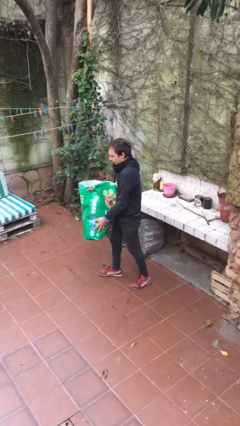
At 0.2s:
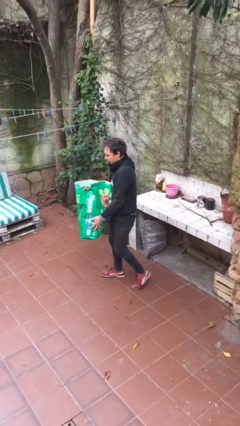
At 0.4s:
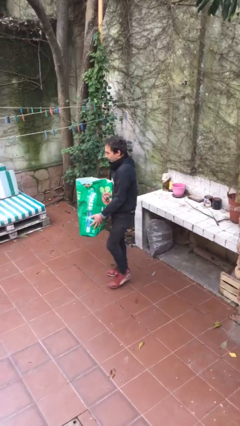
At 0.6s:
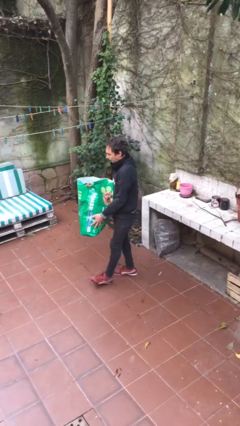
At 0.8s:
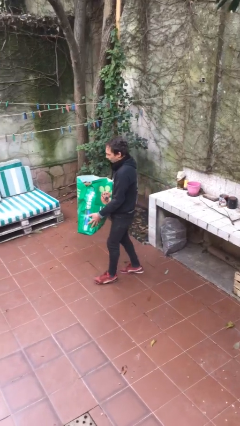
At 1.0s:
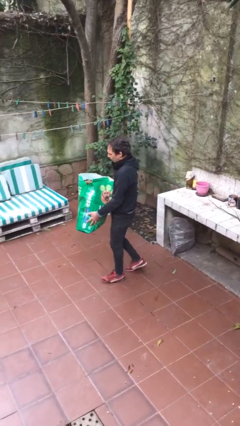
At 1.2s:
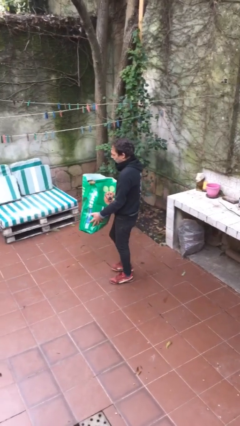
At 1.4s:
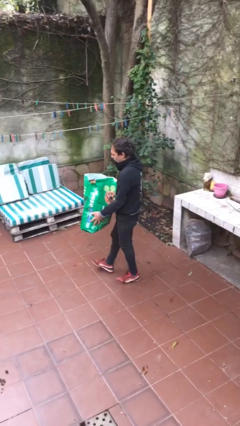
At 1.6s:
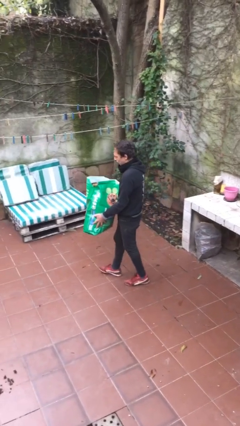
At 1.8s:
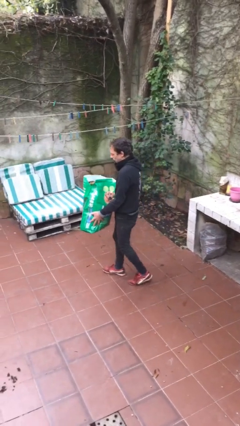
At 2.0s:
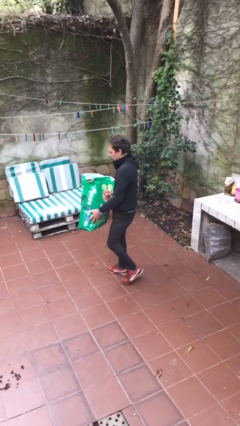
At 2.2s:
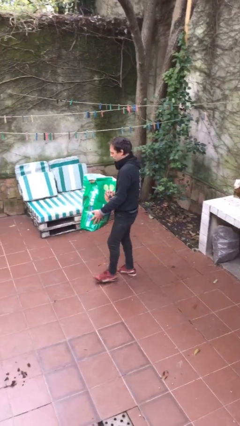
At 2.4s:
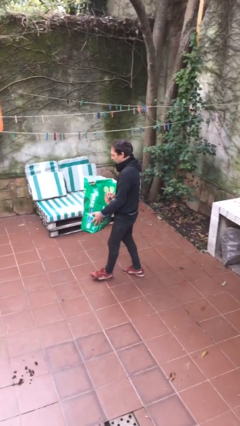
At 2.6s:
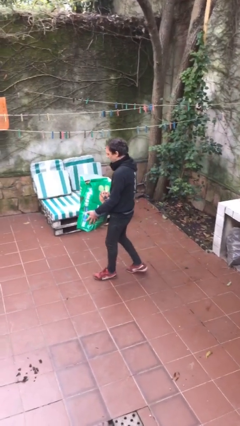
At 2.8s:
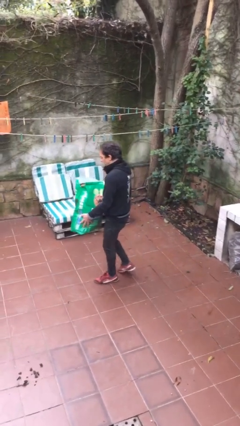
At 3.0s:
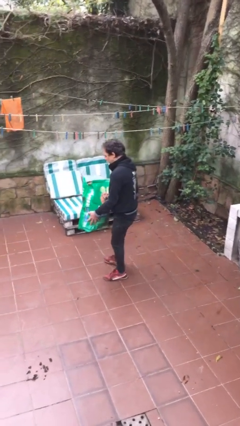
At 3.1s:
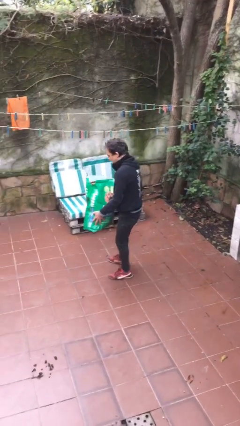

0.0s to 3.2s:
person carries heavy object

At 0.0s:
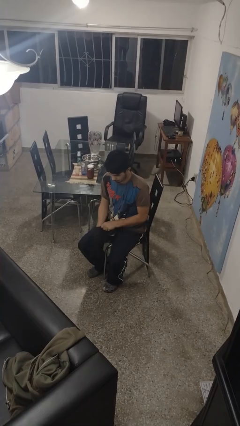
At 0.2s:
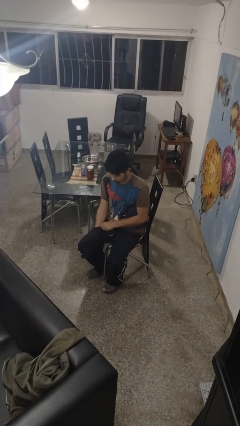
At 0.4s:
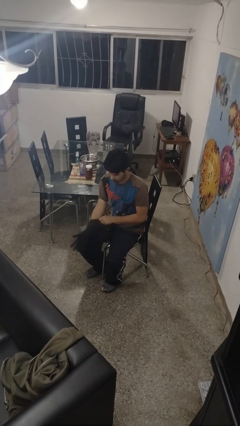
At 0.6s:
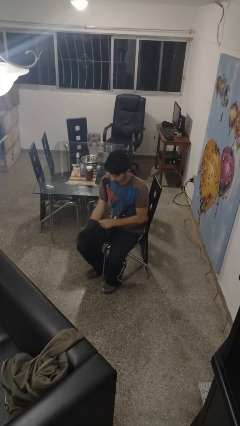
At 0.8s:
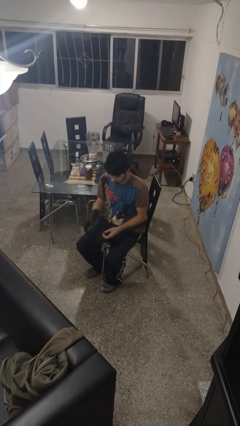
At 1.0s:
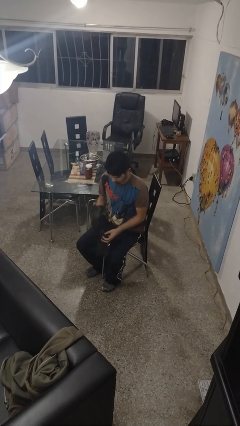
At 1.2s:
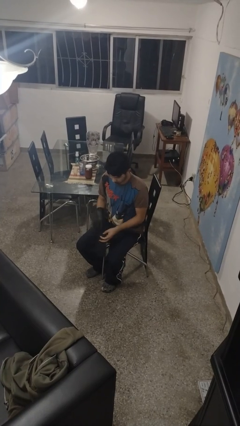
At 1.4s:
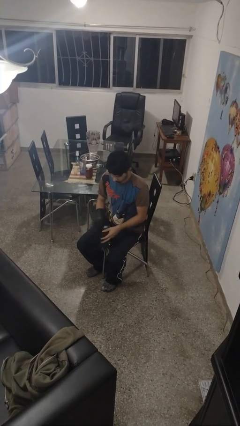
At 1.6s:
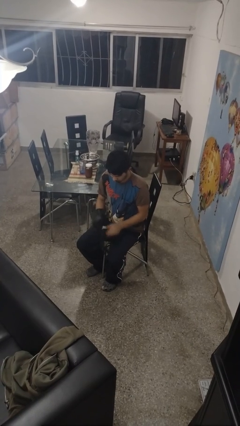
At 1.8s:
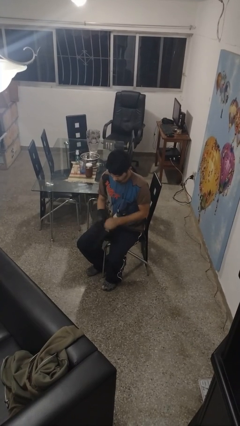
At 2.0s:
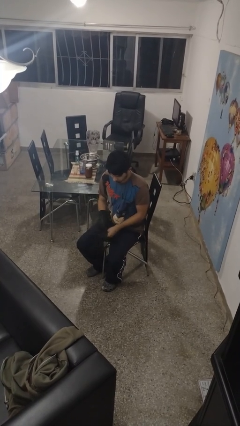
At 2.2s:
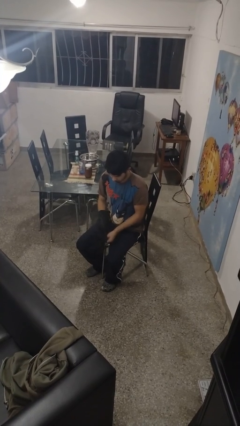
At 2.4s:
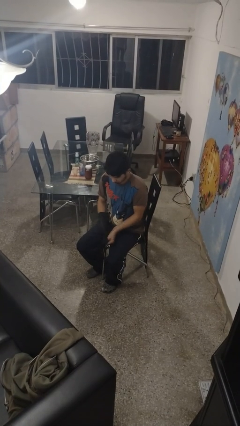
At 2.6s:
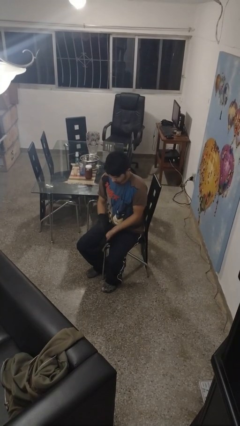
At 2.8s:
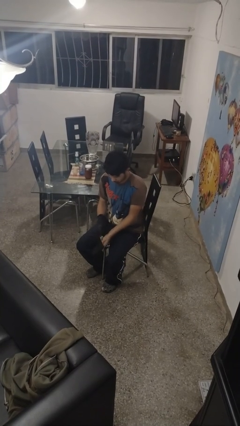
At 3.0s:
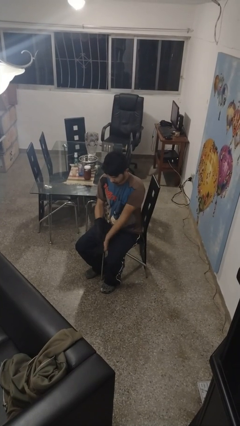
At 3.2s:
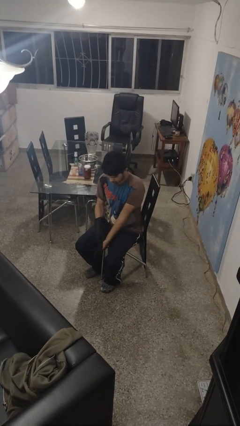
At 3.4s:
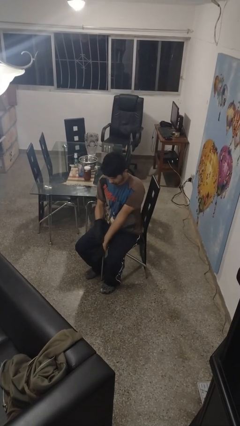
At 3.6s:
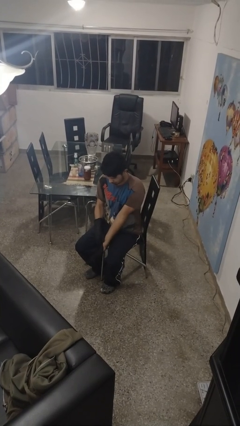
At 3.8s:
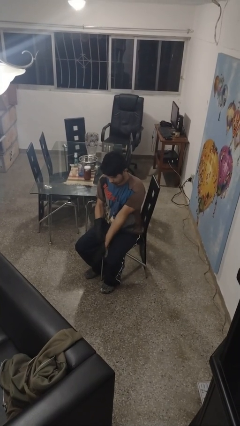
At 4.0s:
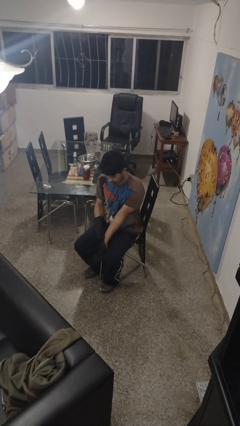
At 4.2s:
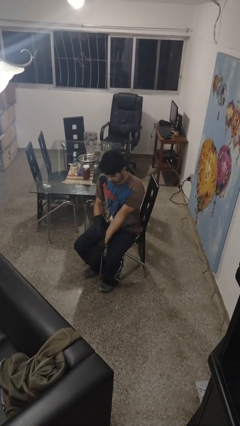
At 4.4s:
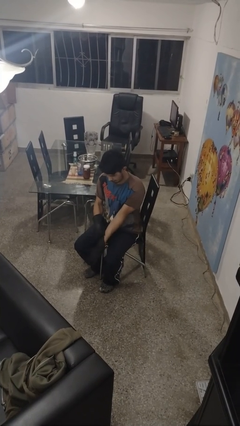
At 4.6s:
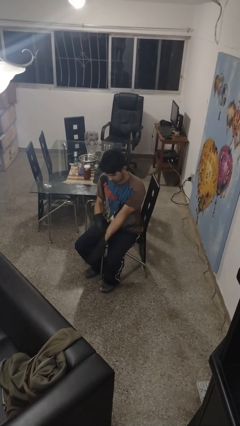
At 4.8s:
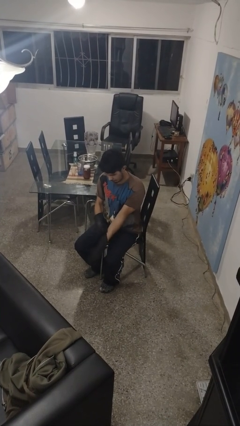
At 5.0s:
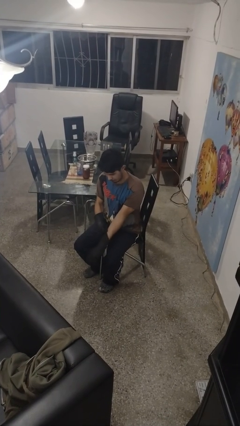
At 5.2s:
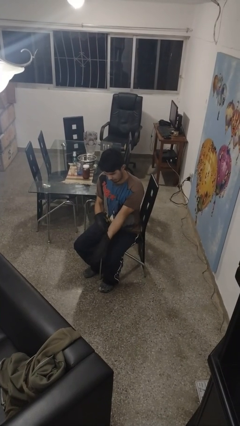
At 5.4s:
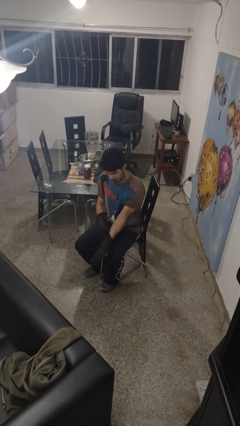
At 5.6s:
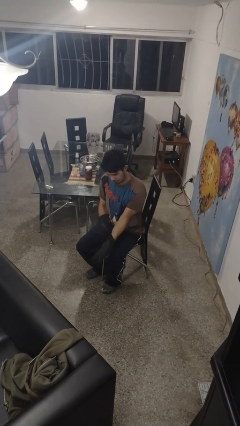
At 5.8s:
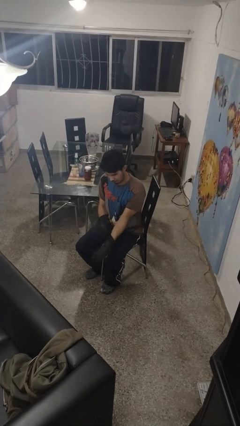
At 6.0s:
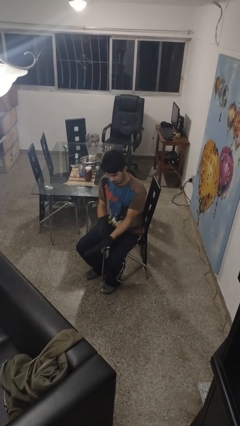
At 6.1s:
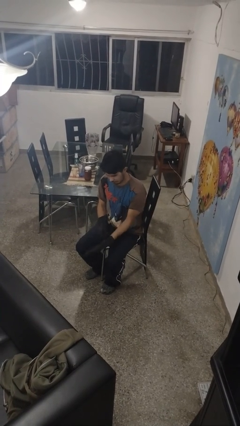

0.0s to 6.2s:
person puts on gloves

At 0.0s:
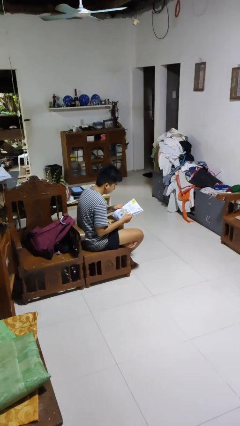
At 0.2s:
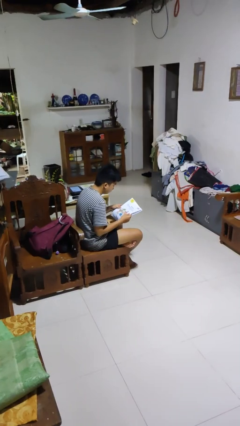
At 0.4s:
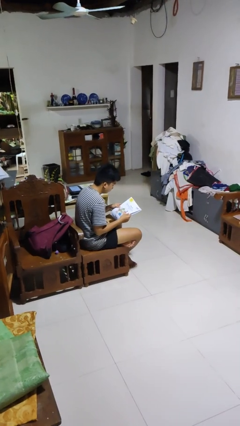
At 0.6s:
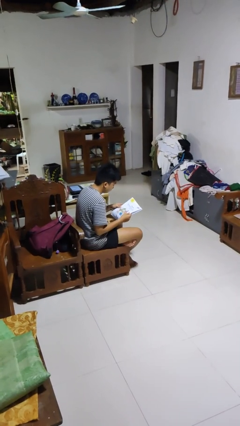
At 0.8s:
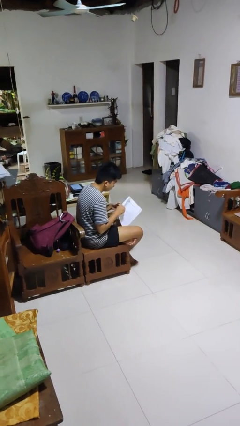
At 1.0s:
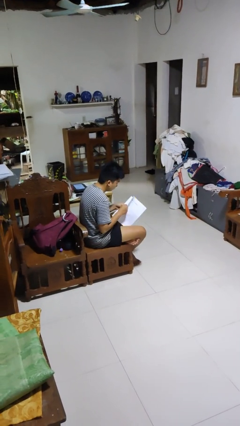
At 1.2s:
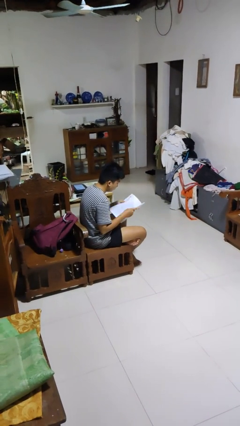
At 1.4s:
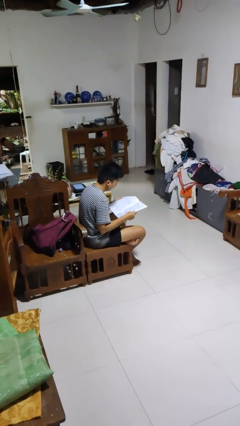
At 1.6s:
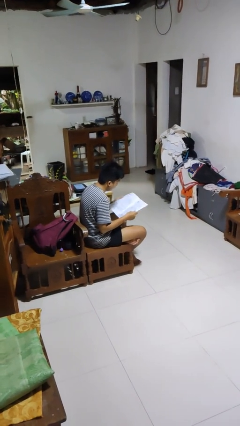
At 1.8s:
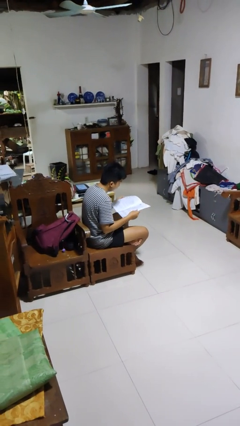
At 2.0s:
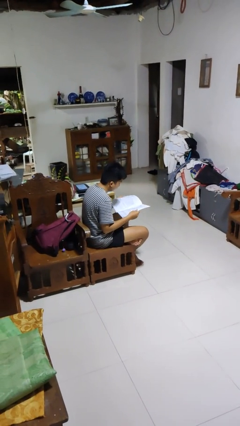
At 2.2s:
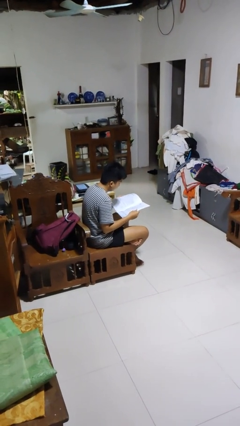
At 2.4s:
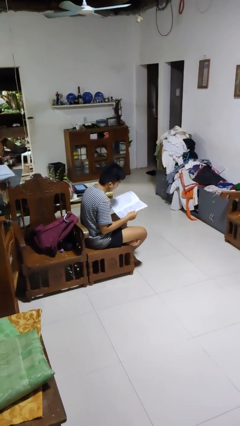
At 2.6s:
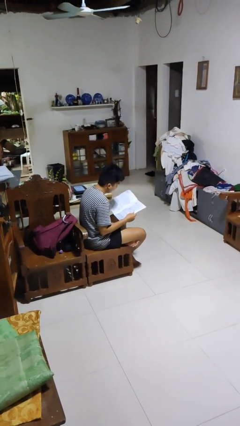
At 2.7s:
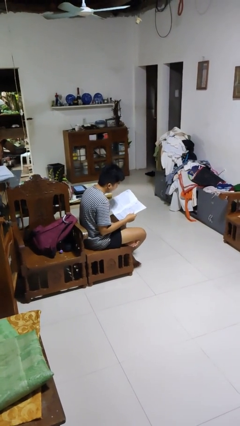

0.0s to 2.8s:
person reads newspaper

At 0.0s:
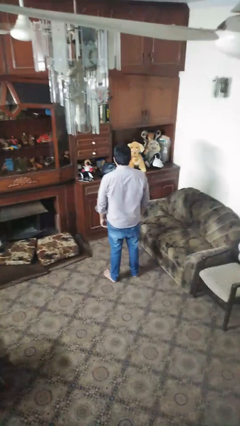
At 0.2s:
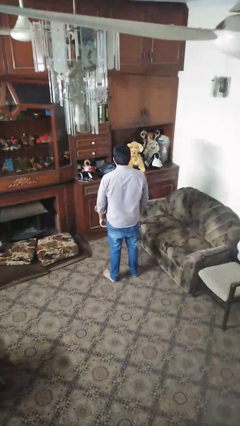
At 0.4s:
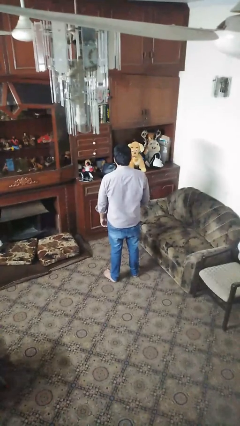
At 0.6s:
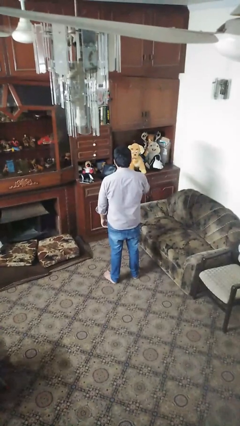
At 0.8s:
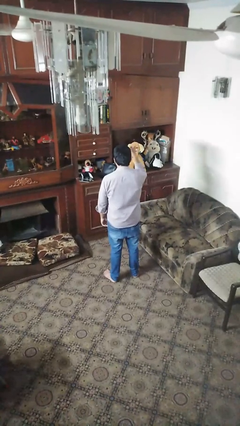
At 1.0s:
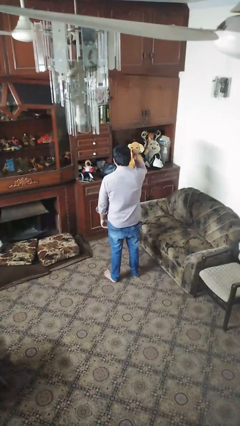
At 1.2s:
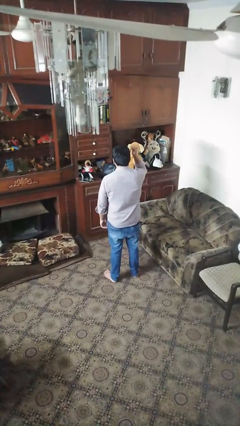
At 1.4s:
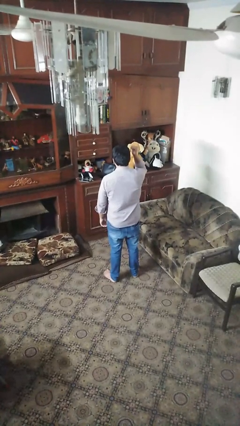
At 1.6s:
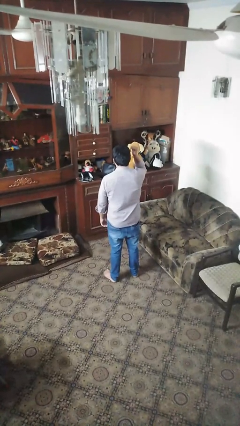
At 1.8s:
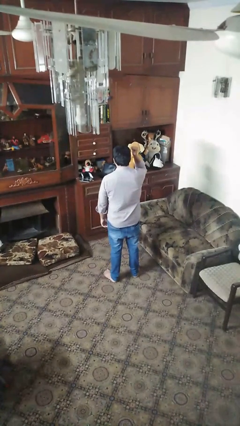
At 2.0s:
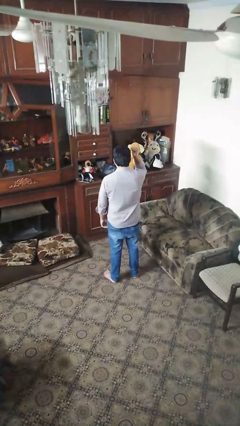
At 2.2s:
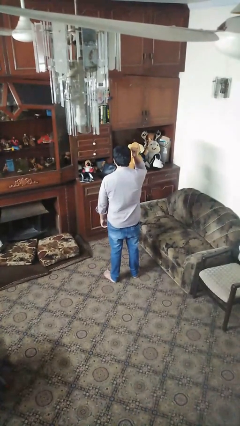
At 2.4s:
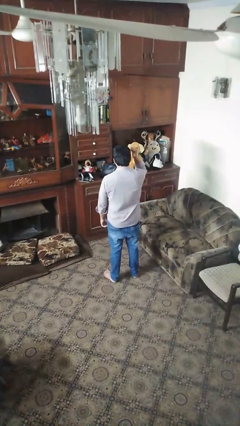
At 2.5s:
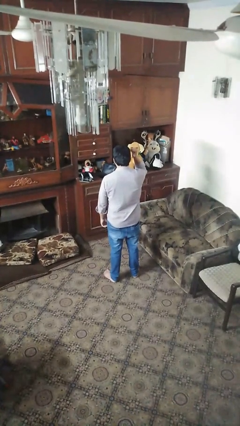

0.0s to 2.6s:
person gestures behind me

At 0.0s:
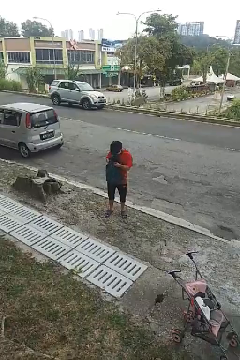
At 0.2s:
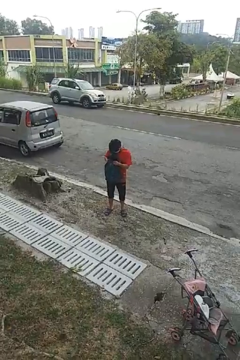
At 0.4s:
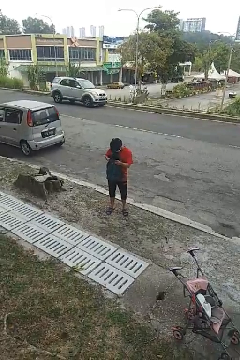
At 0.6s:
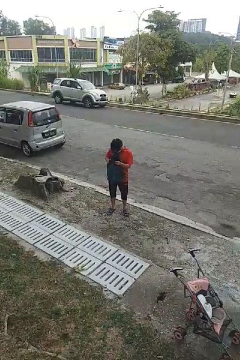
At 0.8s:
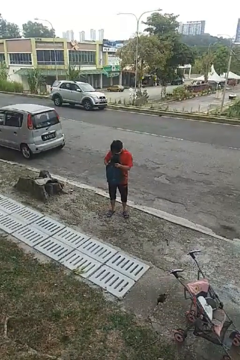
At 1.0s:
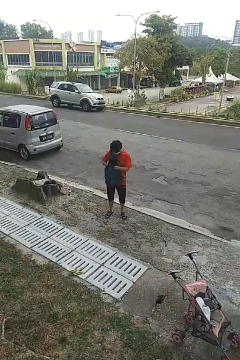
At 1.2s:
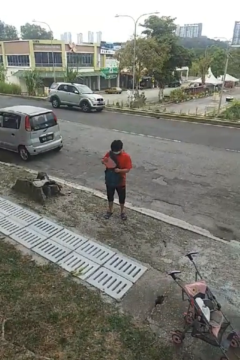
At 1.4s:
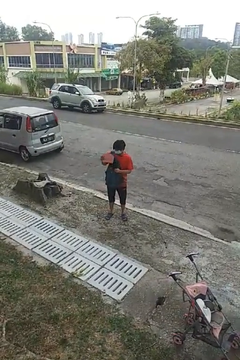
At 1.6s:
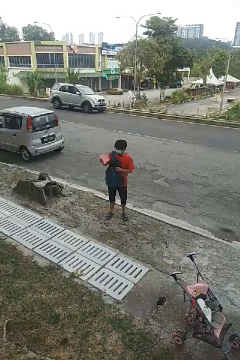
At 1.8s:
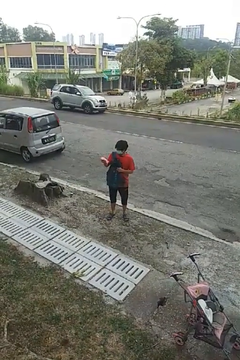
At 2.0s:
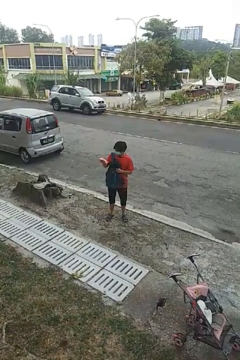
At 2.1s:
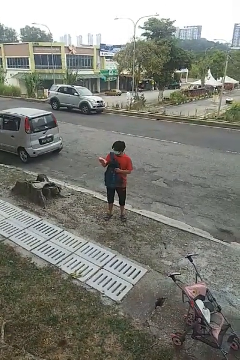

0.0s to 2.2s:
person takes object from backpack

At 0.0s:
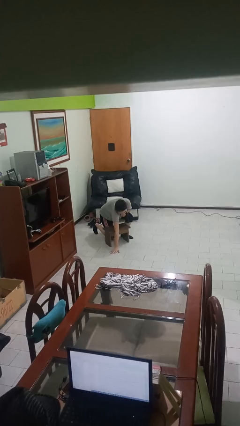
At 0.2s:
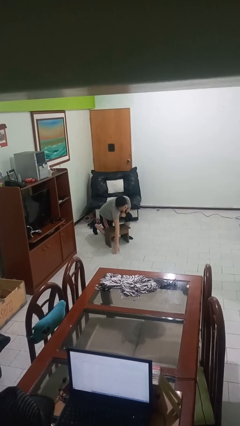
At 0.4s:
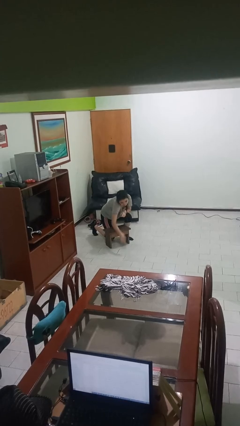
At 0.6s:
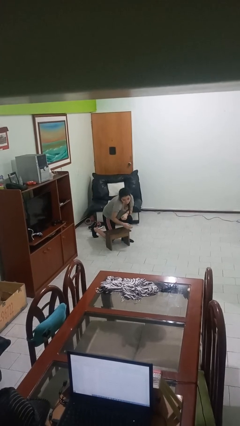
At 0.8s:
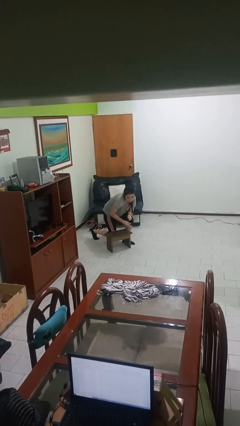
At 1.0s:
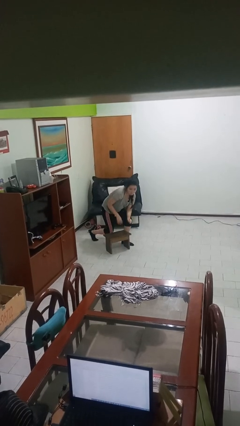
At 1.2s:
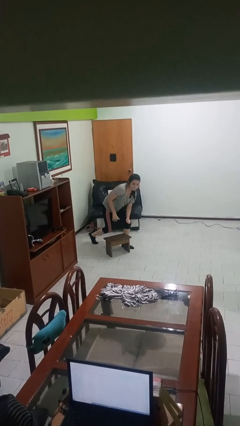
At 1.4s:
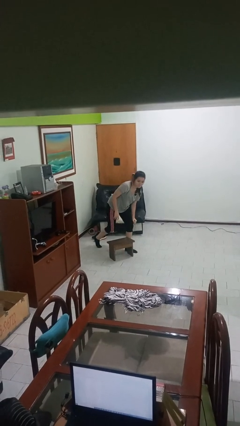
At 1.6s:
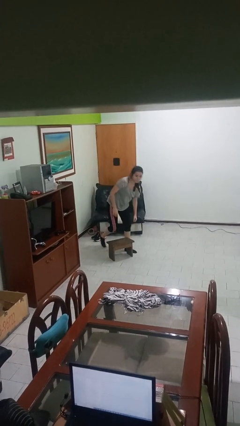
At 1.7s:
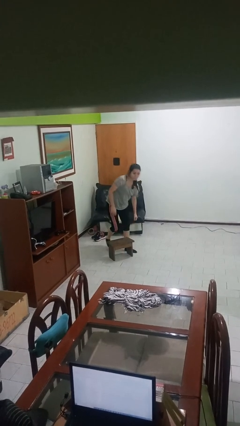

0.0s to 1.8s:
person stands up from floor
